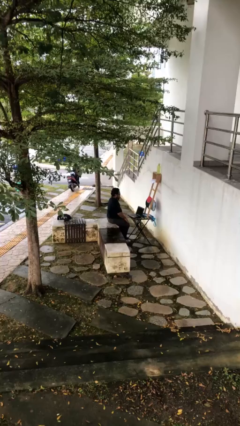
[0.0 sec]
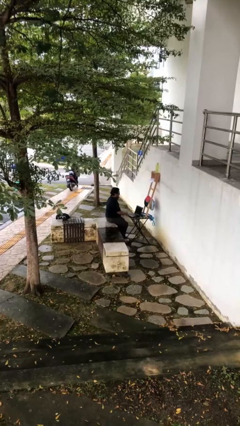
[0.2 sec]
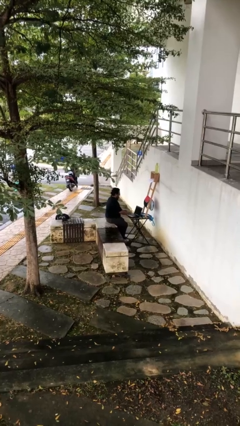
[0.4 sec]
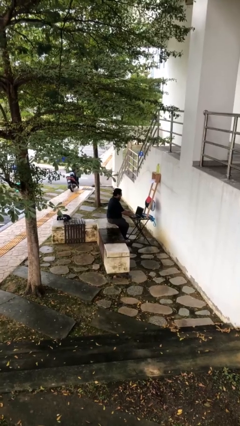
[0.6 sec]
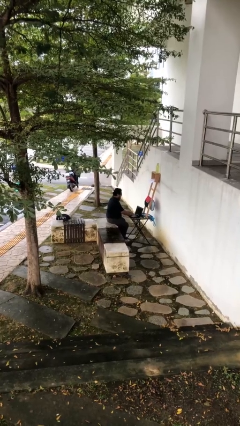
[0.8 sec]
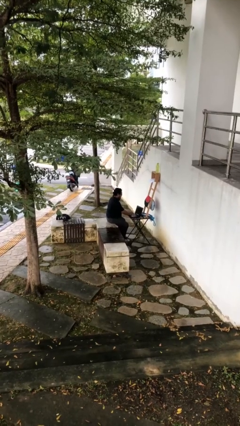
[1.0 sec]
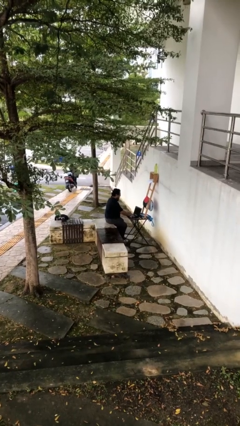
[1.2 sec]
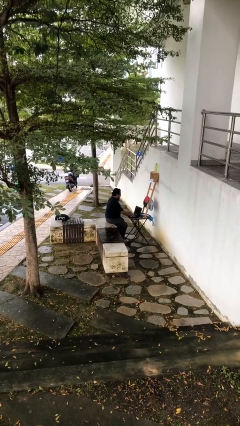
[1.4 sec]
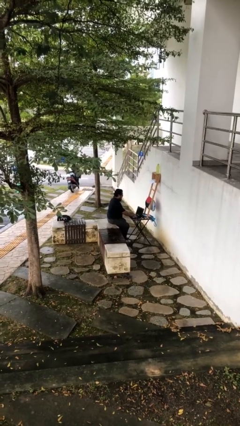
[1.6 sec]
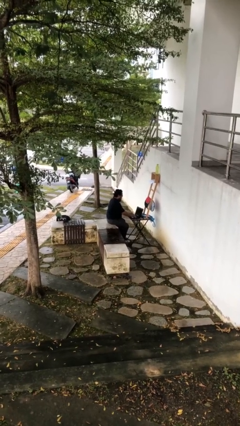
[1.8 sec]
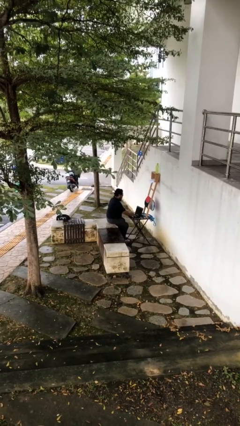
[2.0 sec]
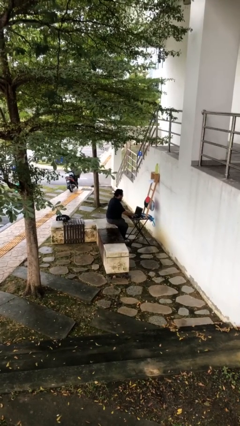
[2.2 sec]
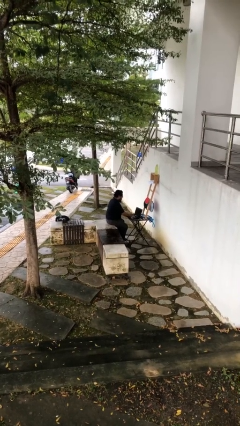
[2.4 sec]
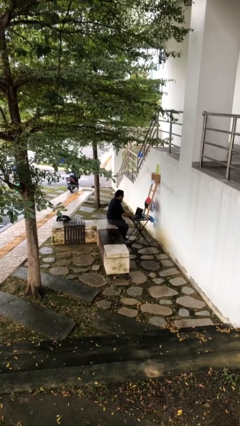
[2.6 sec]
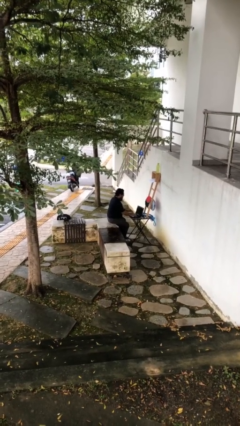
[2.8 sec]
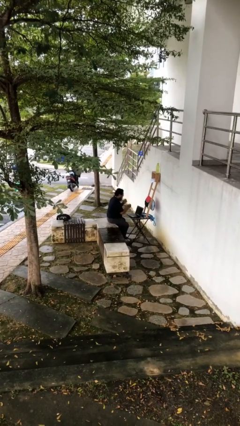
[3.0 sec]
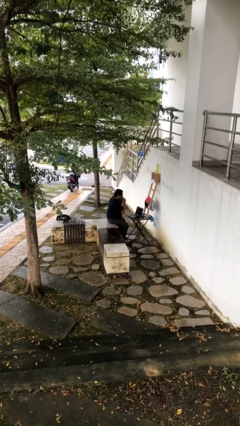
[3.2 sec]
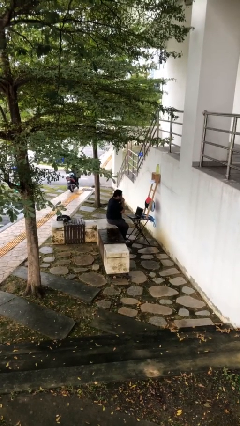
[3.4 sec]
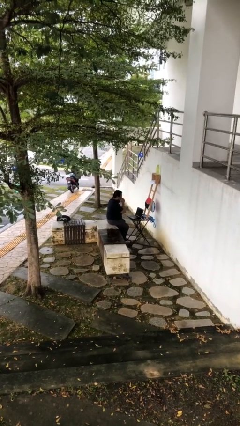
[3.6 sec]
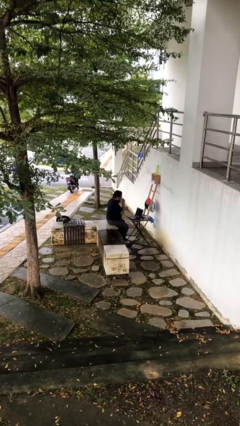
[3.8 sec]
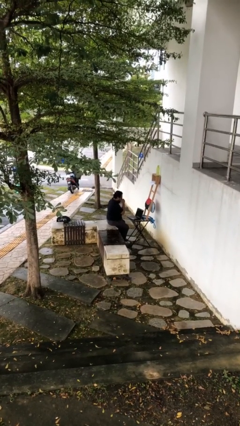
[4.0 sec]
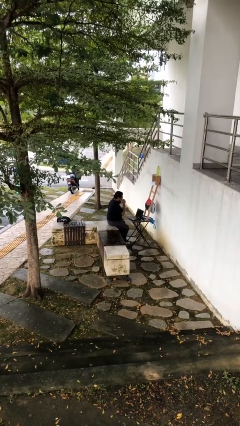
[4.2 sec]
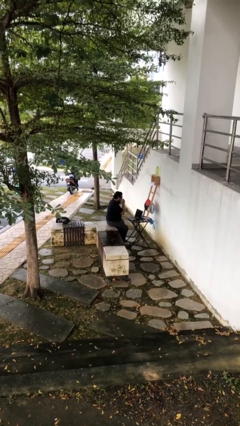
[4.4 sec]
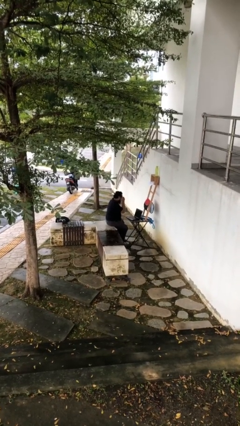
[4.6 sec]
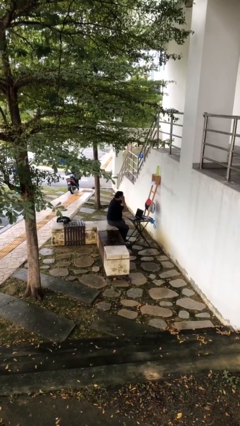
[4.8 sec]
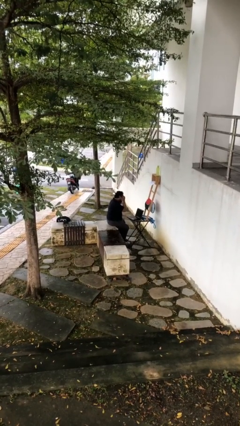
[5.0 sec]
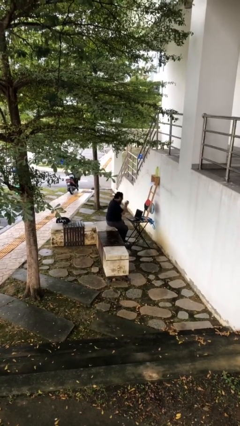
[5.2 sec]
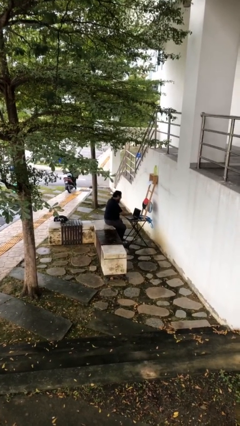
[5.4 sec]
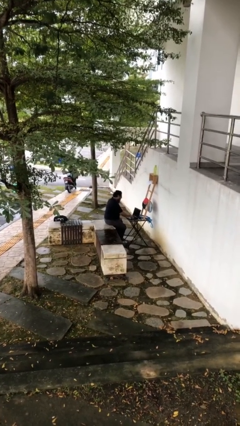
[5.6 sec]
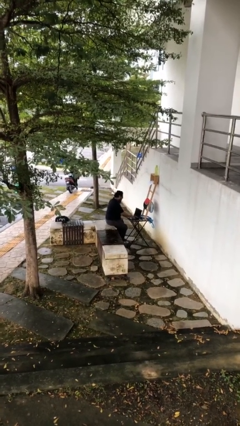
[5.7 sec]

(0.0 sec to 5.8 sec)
person interacts with laptop

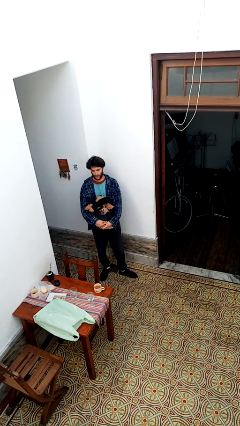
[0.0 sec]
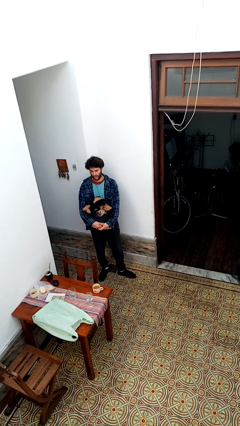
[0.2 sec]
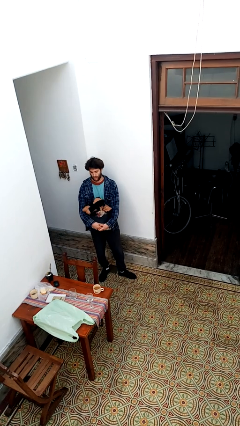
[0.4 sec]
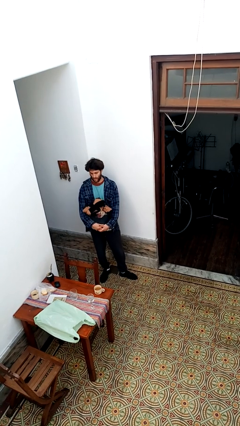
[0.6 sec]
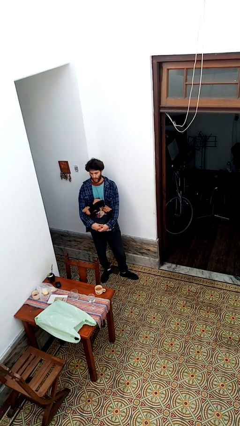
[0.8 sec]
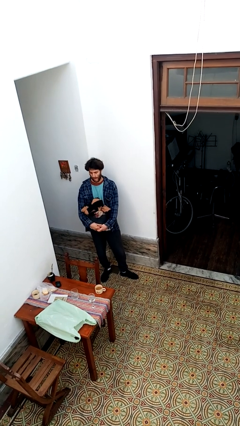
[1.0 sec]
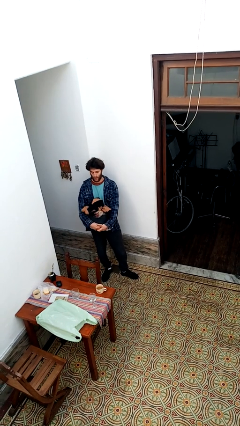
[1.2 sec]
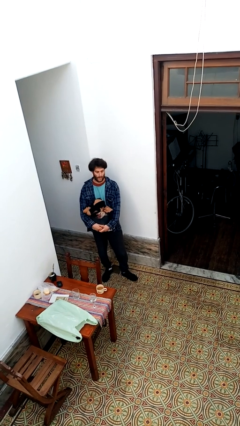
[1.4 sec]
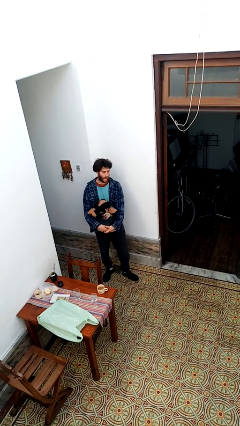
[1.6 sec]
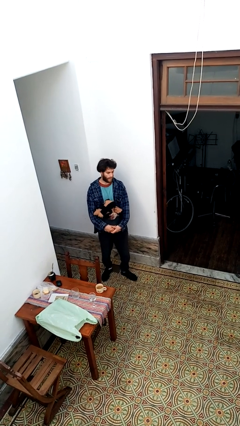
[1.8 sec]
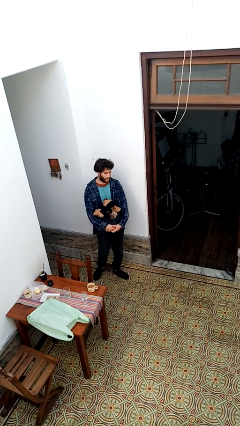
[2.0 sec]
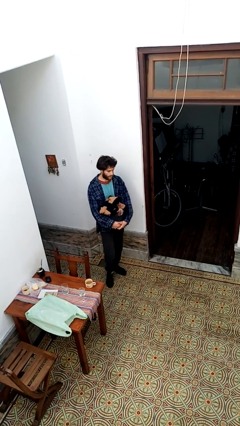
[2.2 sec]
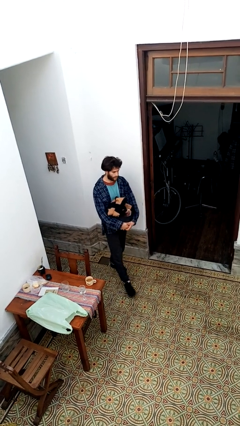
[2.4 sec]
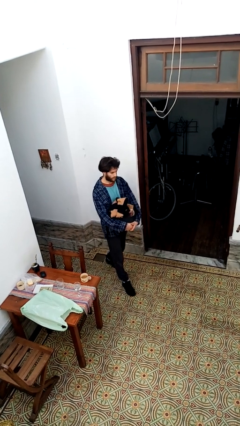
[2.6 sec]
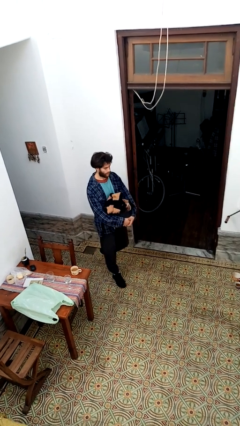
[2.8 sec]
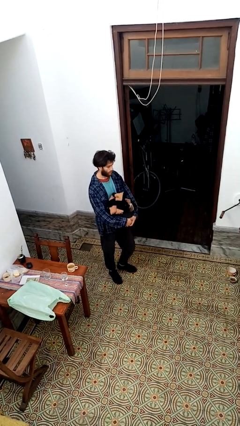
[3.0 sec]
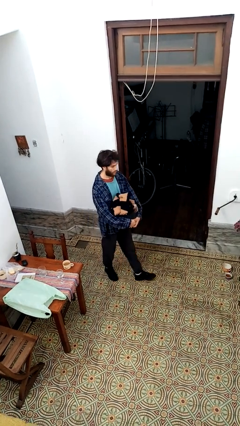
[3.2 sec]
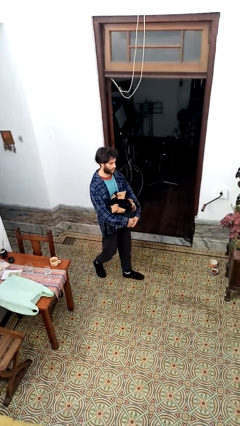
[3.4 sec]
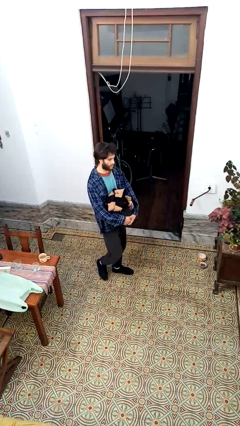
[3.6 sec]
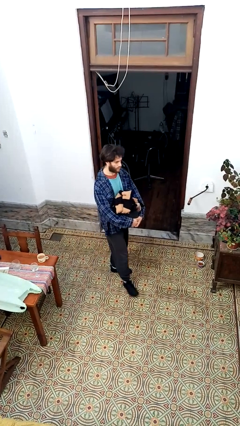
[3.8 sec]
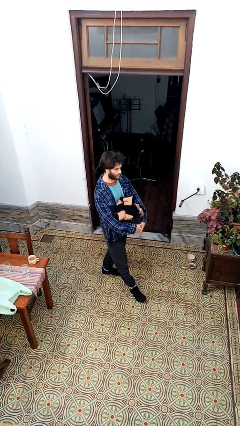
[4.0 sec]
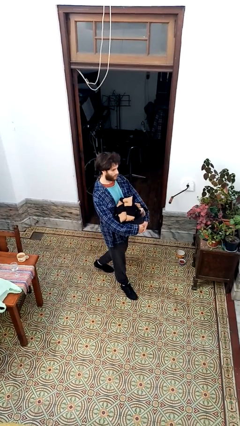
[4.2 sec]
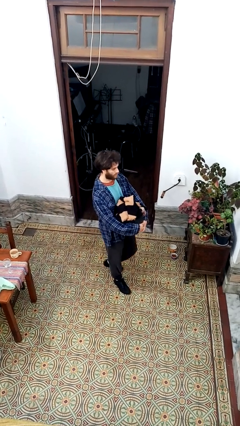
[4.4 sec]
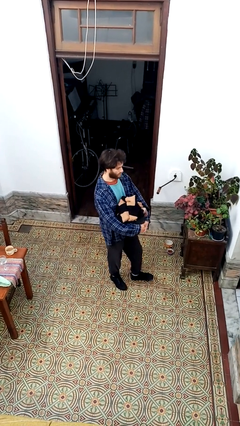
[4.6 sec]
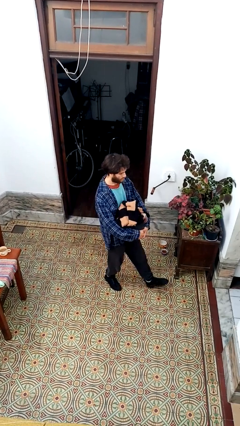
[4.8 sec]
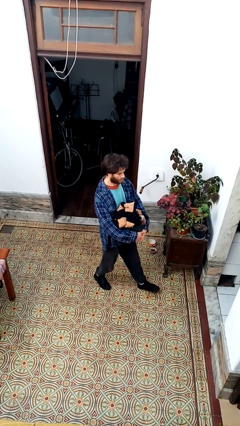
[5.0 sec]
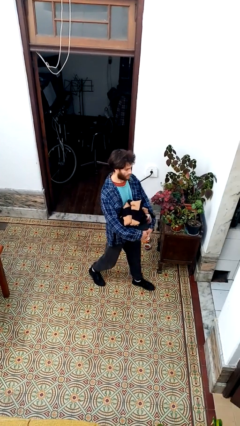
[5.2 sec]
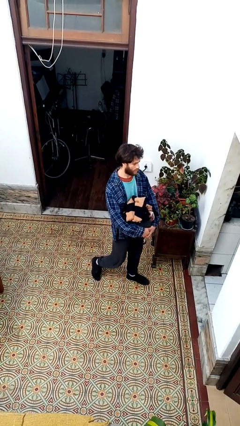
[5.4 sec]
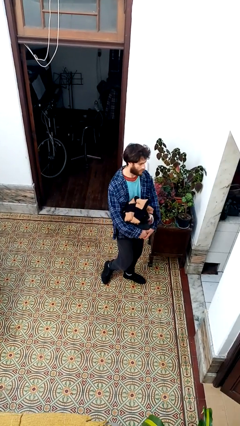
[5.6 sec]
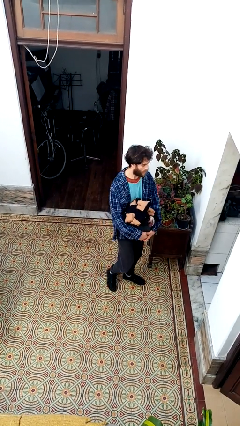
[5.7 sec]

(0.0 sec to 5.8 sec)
person carries laundry basket

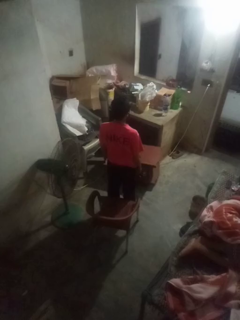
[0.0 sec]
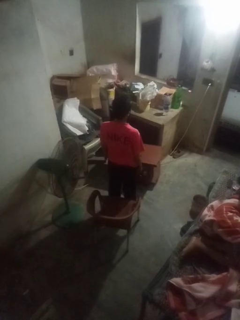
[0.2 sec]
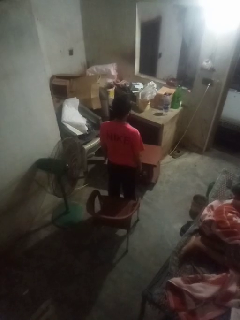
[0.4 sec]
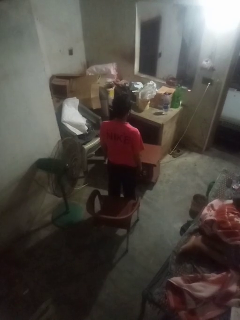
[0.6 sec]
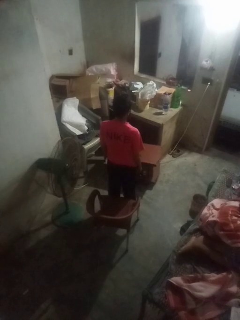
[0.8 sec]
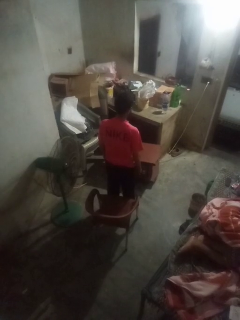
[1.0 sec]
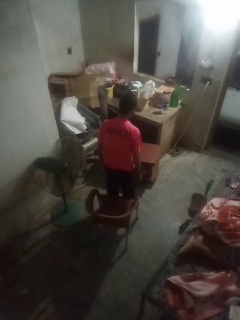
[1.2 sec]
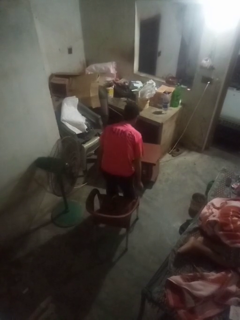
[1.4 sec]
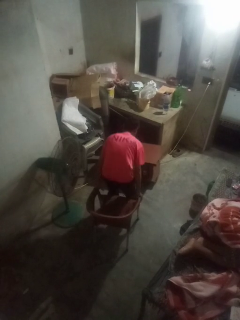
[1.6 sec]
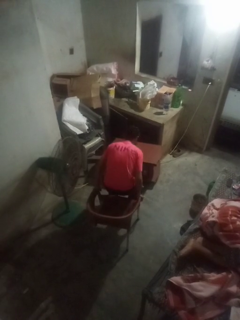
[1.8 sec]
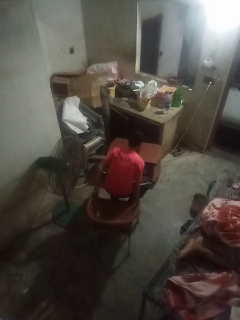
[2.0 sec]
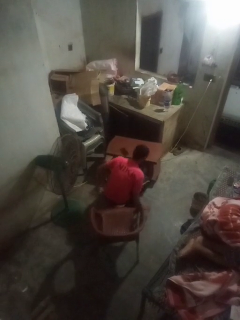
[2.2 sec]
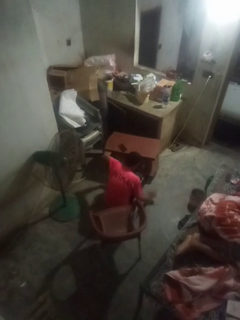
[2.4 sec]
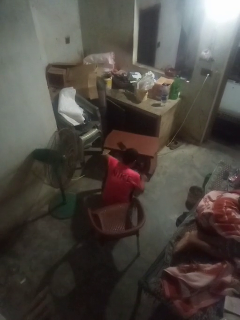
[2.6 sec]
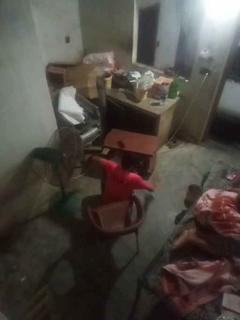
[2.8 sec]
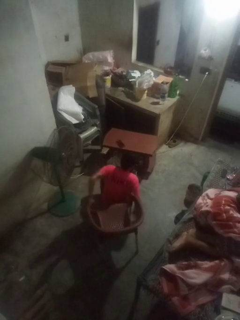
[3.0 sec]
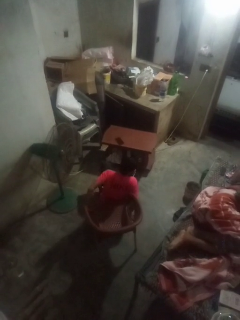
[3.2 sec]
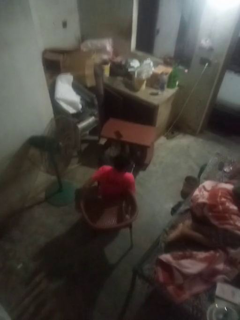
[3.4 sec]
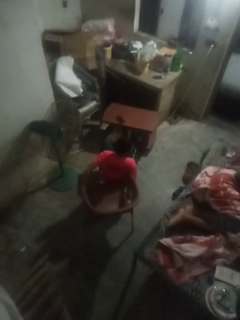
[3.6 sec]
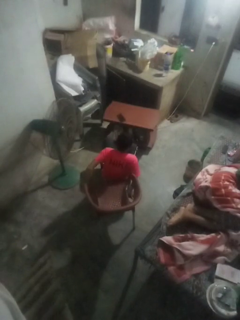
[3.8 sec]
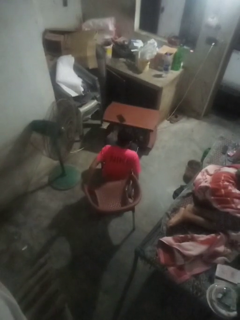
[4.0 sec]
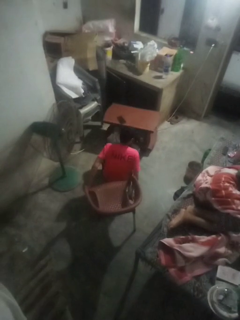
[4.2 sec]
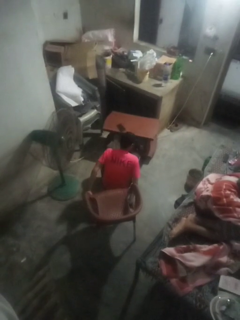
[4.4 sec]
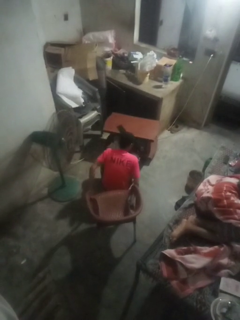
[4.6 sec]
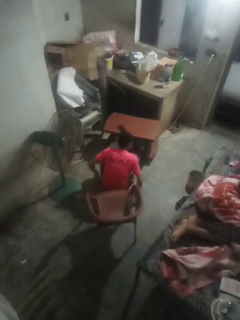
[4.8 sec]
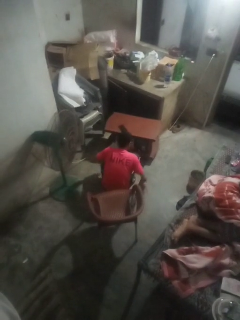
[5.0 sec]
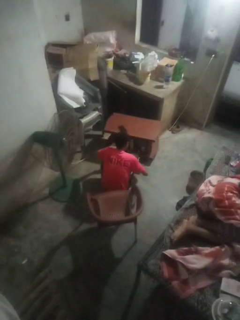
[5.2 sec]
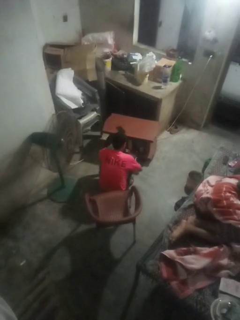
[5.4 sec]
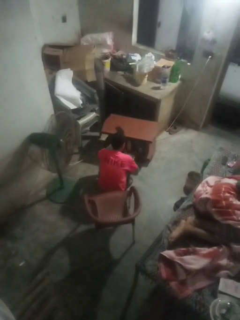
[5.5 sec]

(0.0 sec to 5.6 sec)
person falls from chair

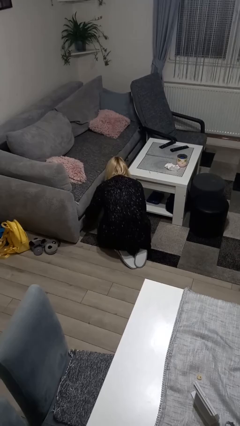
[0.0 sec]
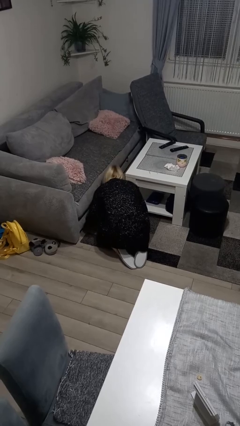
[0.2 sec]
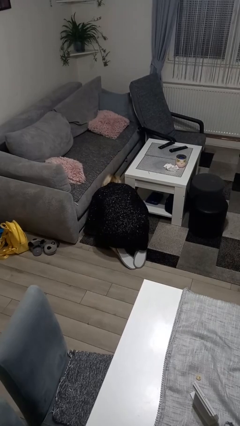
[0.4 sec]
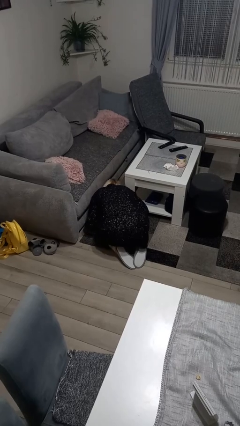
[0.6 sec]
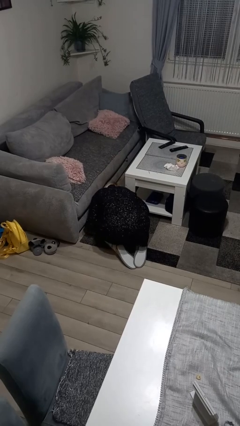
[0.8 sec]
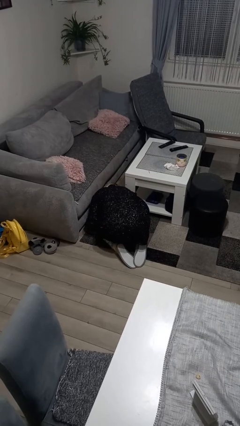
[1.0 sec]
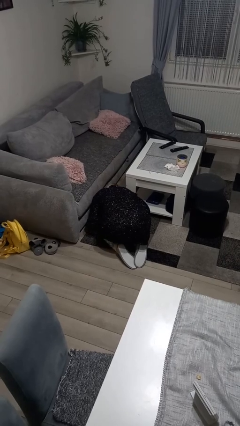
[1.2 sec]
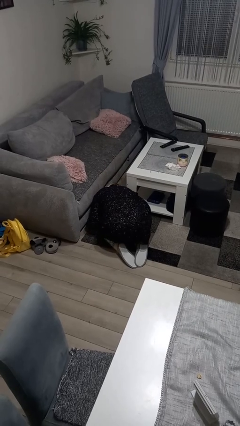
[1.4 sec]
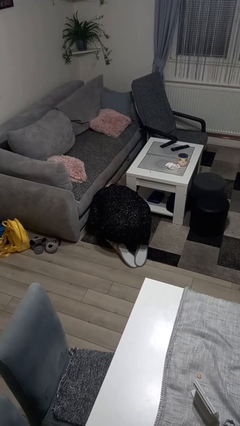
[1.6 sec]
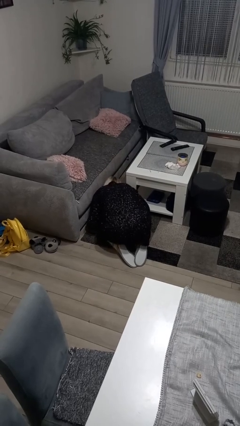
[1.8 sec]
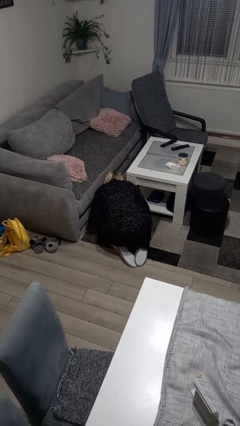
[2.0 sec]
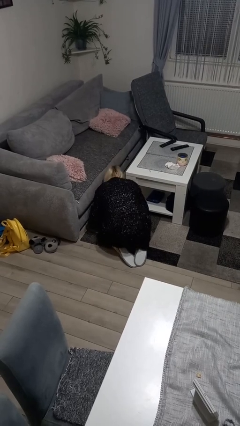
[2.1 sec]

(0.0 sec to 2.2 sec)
person searches under couch
